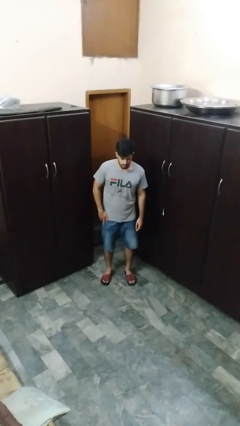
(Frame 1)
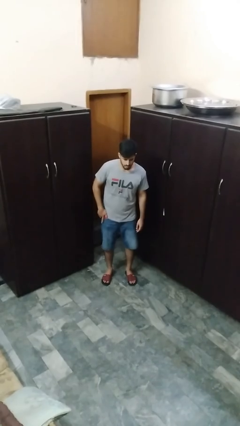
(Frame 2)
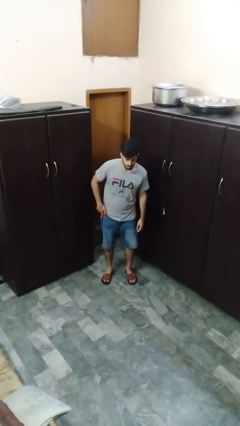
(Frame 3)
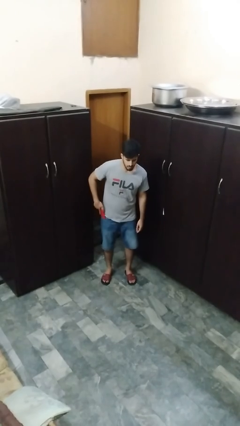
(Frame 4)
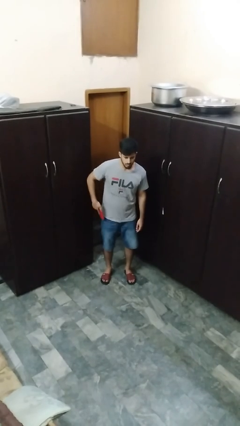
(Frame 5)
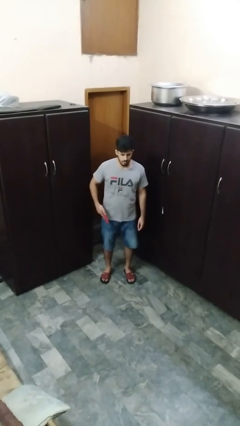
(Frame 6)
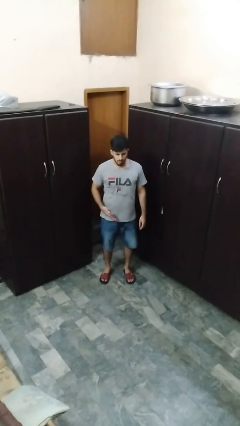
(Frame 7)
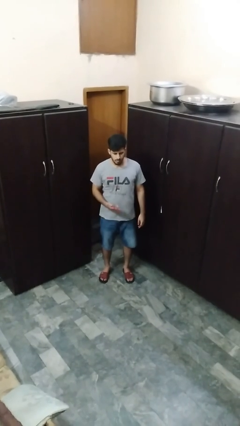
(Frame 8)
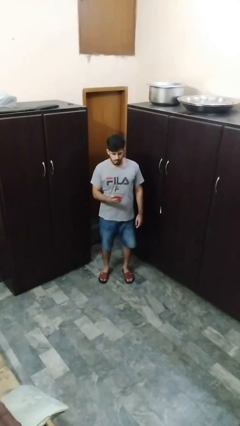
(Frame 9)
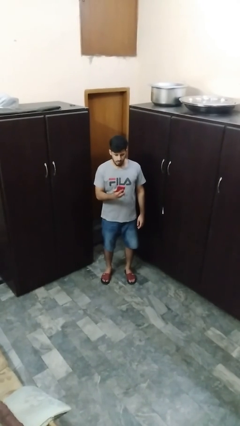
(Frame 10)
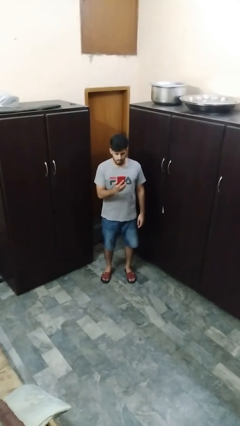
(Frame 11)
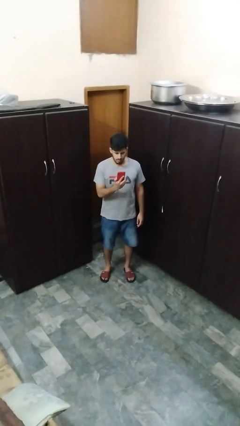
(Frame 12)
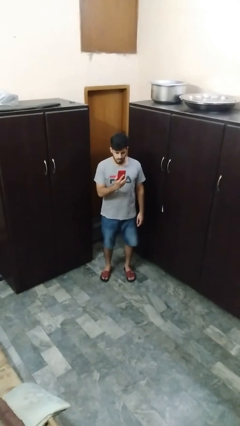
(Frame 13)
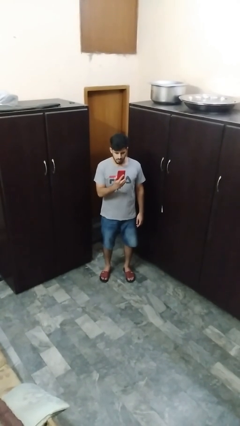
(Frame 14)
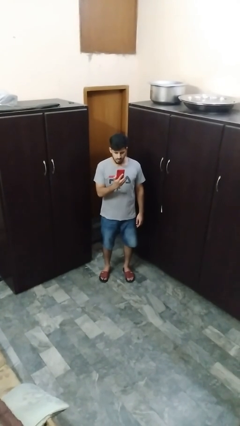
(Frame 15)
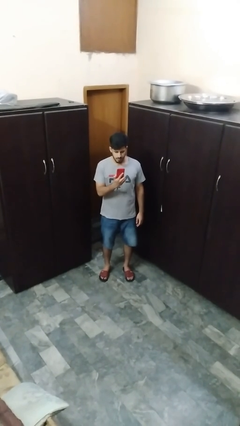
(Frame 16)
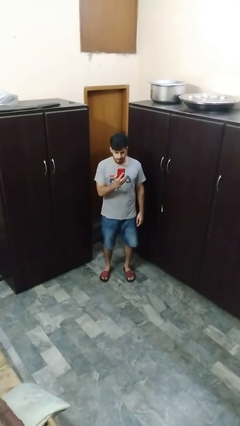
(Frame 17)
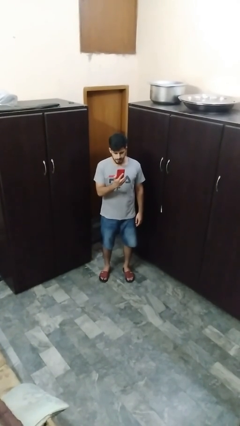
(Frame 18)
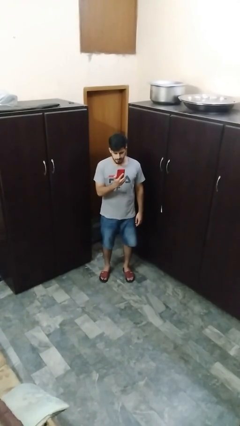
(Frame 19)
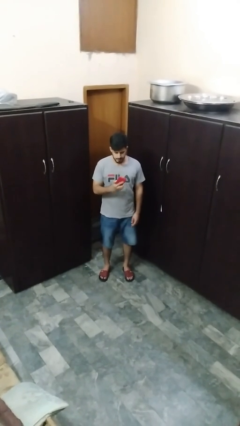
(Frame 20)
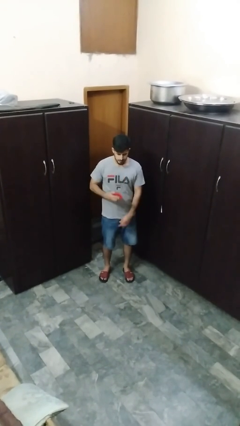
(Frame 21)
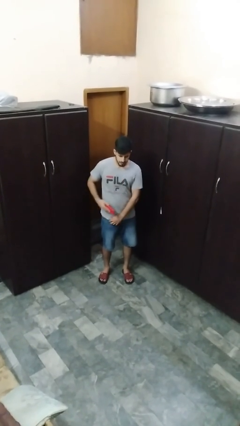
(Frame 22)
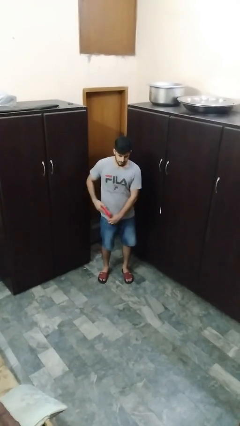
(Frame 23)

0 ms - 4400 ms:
person takes phone from pocket

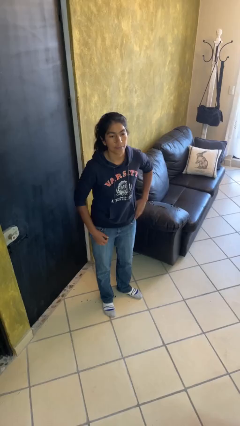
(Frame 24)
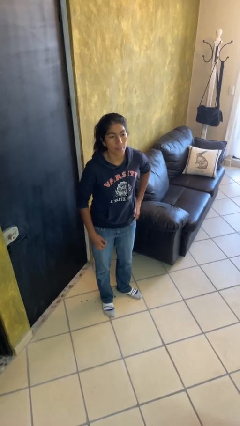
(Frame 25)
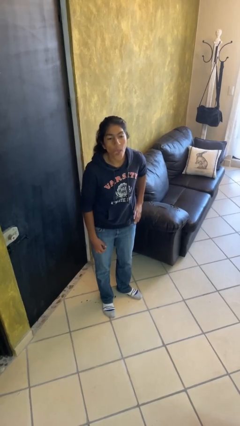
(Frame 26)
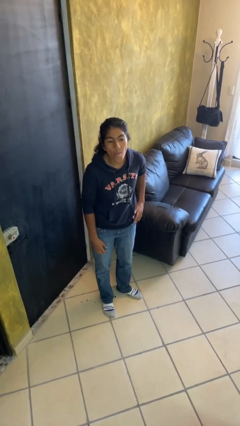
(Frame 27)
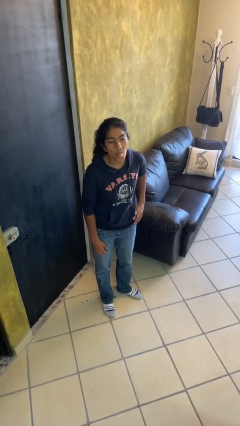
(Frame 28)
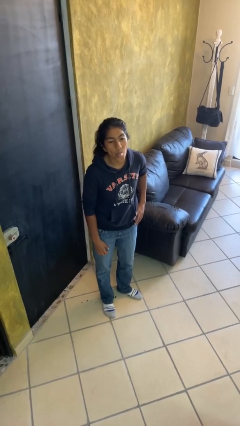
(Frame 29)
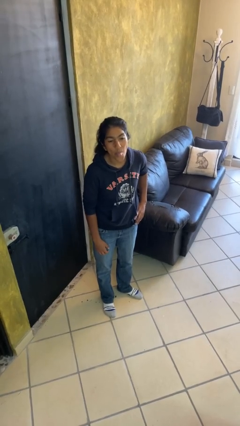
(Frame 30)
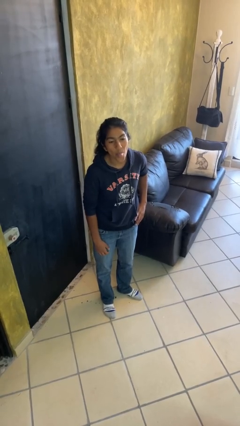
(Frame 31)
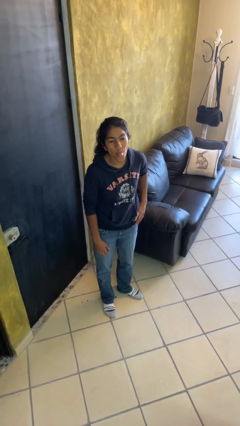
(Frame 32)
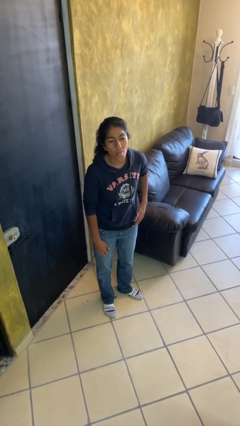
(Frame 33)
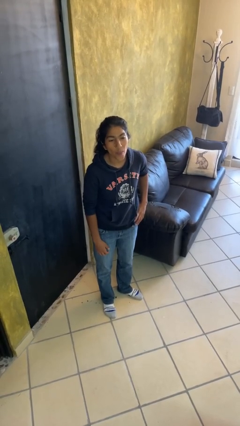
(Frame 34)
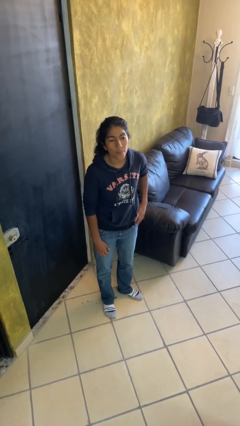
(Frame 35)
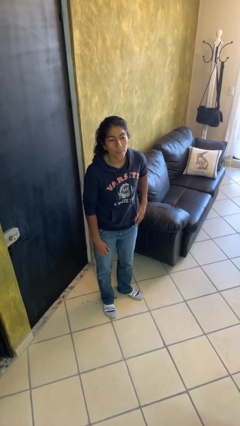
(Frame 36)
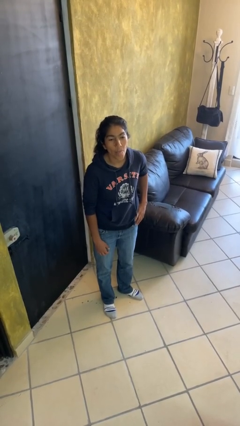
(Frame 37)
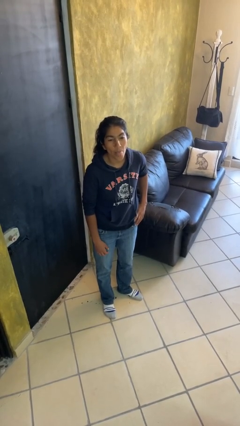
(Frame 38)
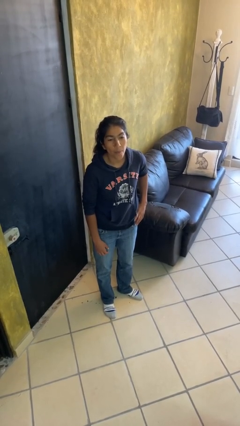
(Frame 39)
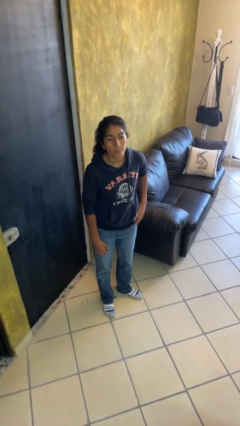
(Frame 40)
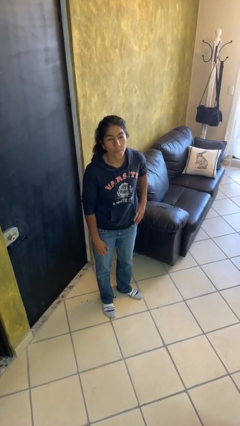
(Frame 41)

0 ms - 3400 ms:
person sticks out tongue

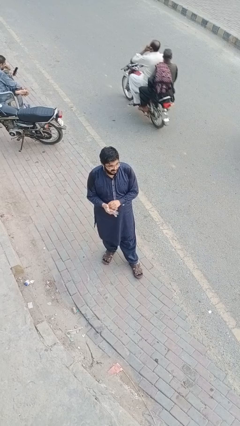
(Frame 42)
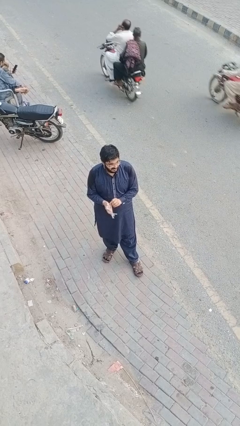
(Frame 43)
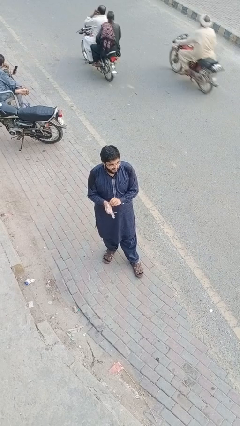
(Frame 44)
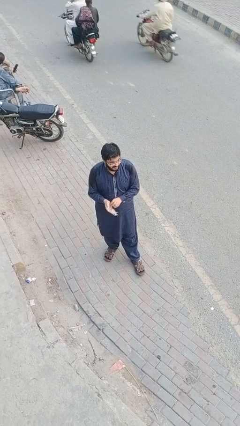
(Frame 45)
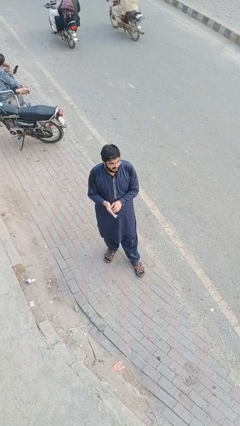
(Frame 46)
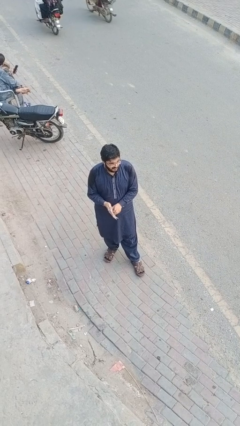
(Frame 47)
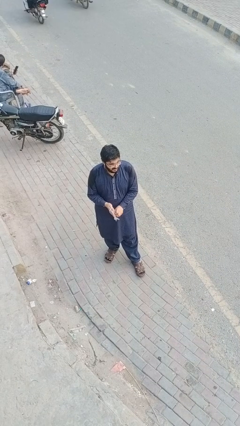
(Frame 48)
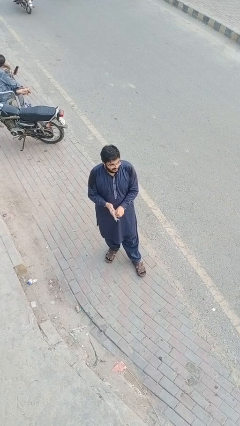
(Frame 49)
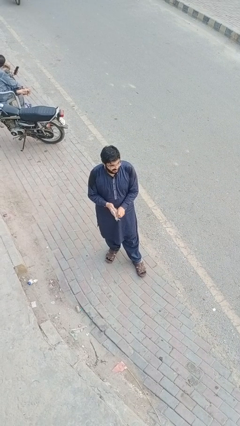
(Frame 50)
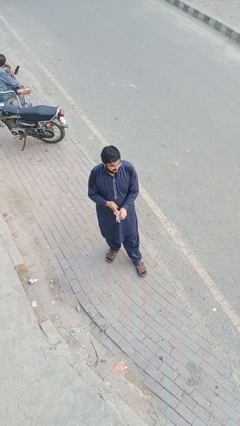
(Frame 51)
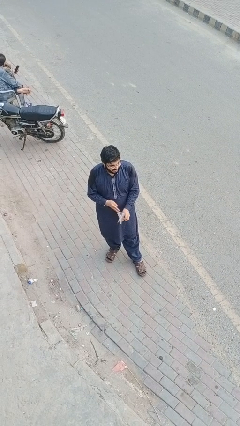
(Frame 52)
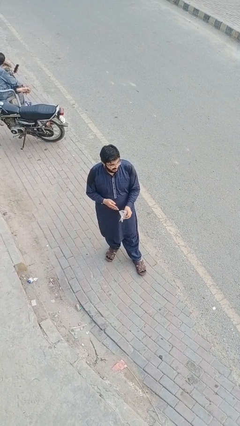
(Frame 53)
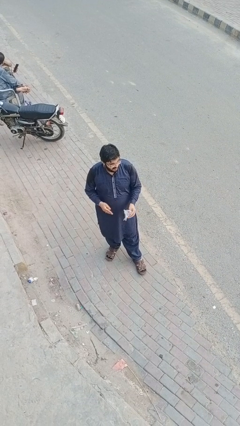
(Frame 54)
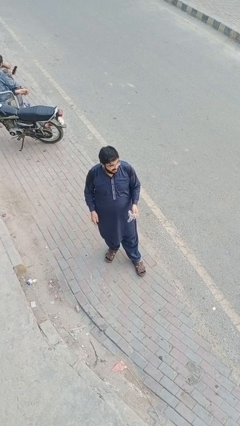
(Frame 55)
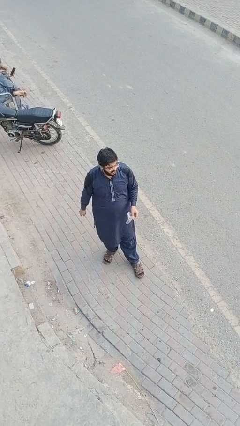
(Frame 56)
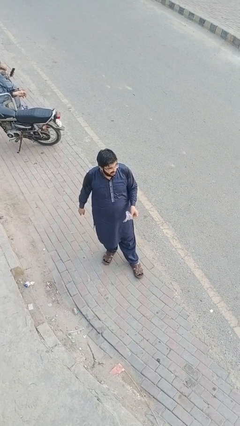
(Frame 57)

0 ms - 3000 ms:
person takes off gloves

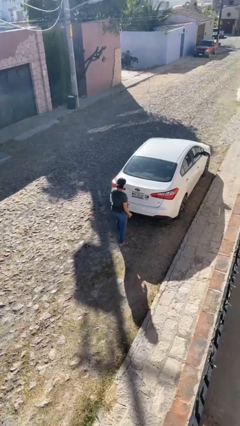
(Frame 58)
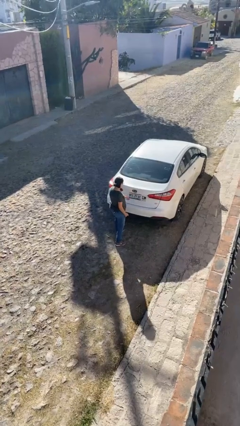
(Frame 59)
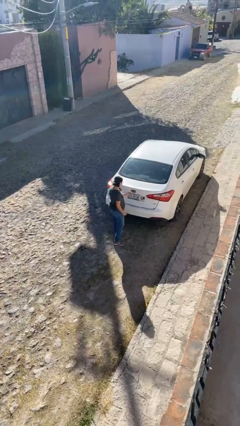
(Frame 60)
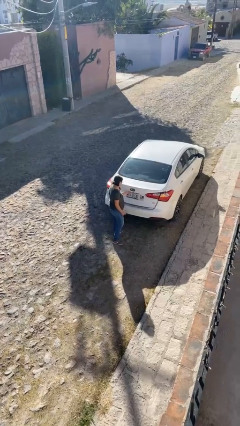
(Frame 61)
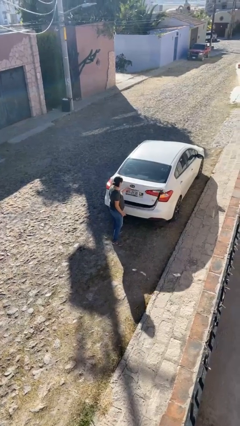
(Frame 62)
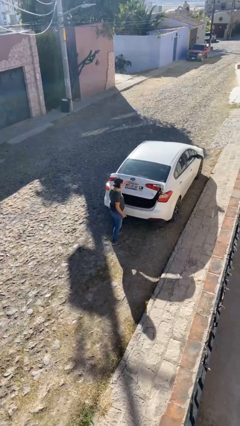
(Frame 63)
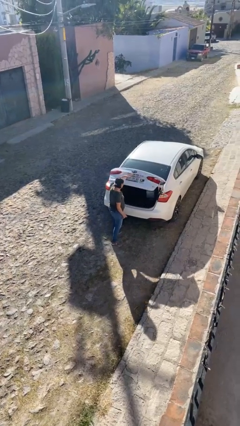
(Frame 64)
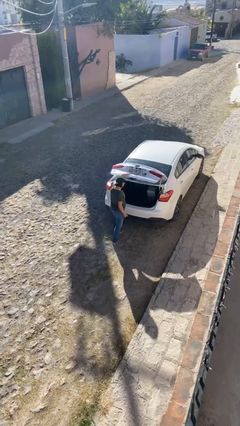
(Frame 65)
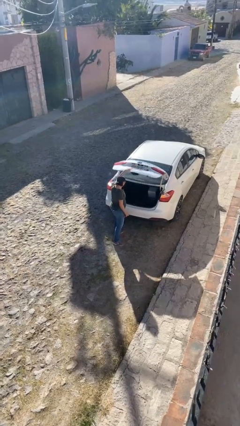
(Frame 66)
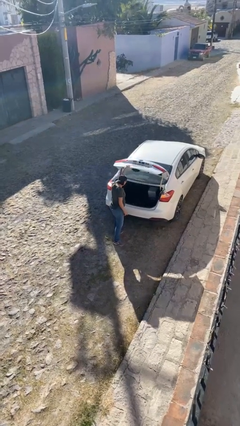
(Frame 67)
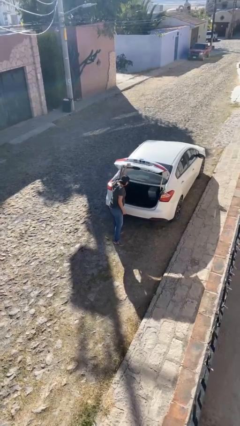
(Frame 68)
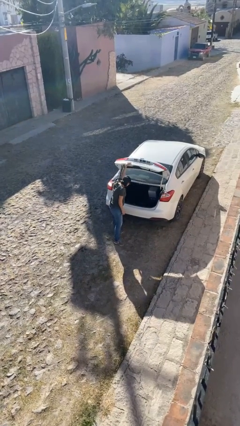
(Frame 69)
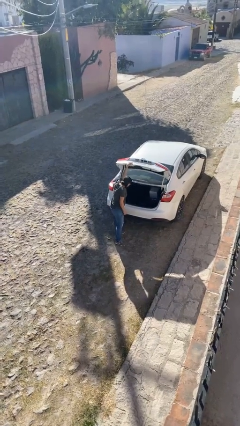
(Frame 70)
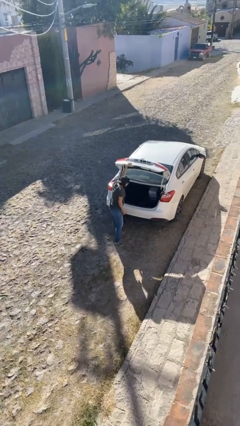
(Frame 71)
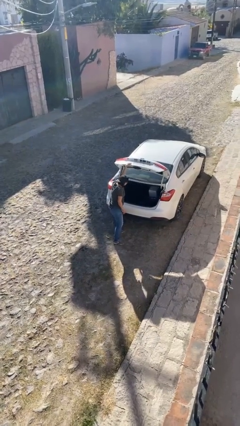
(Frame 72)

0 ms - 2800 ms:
person opens car trunk

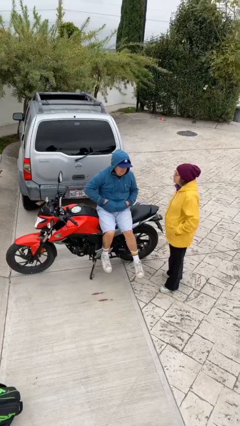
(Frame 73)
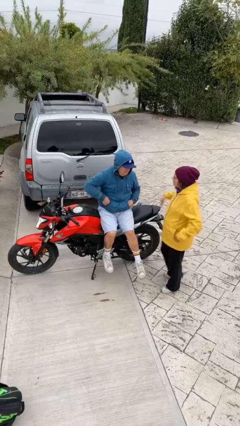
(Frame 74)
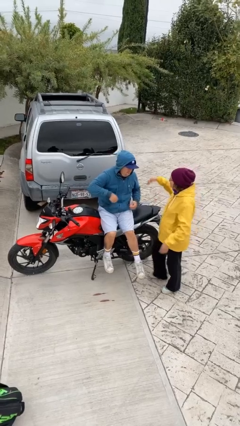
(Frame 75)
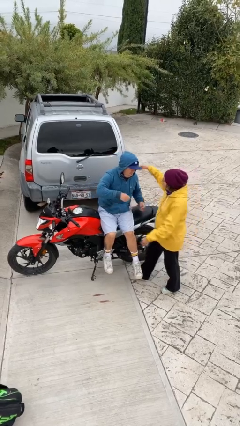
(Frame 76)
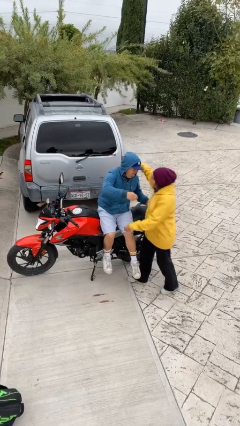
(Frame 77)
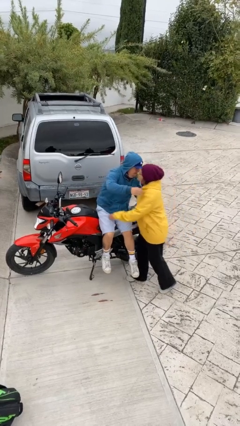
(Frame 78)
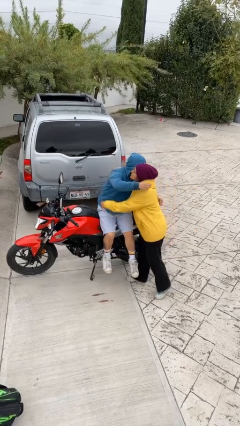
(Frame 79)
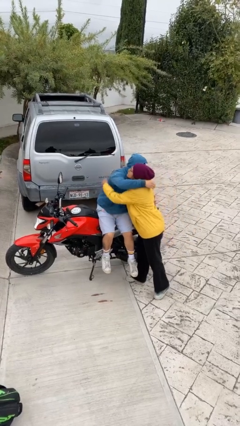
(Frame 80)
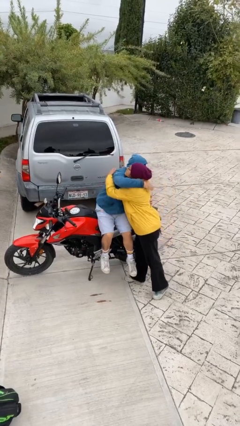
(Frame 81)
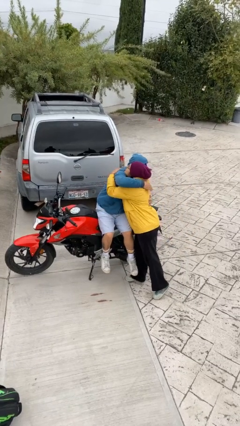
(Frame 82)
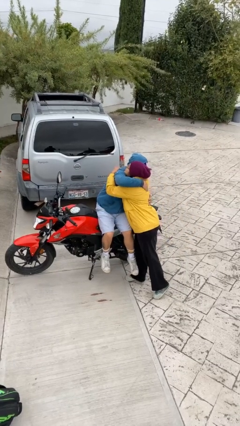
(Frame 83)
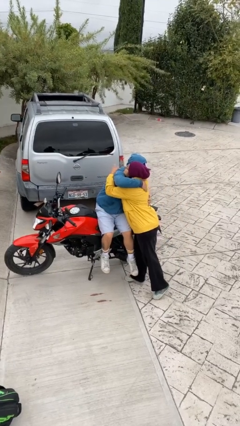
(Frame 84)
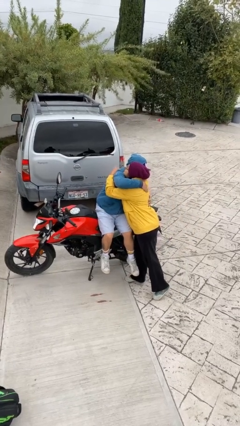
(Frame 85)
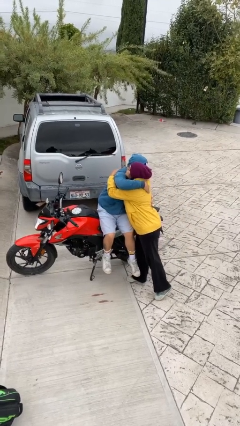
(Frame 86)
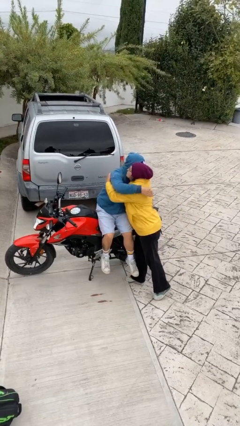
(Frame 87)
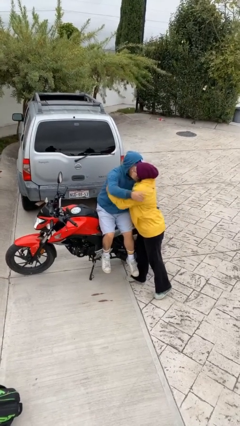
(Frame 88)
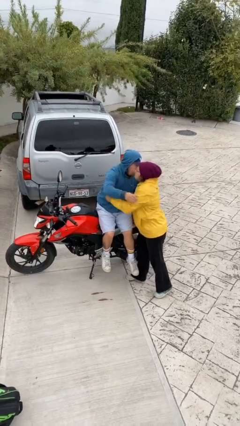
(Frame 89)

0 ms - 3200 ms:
person embraces person

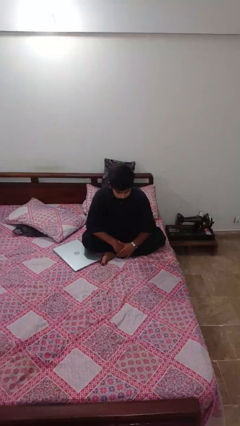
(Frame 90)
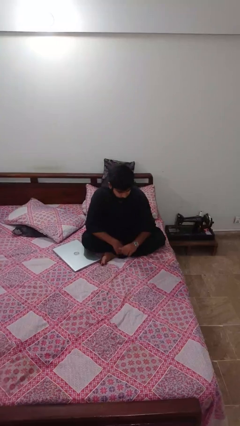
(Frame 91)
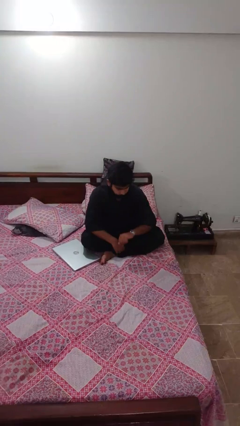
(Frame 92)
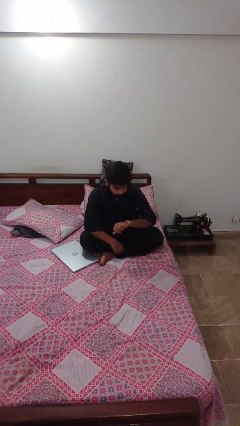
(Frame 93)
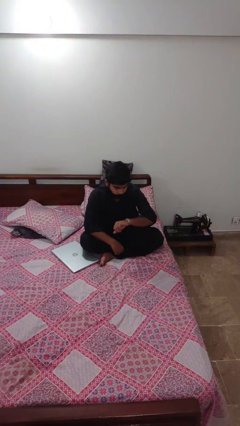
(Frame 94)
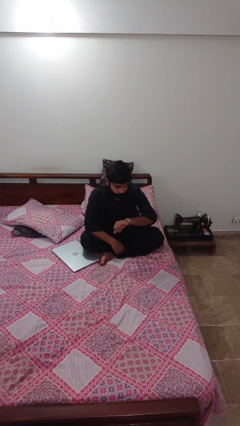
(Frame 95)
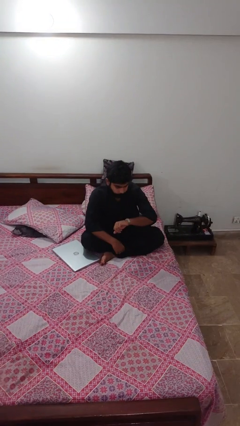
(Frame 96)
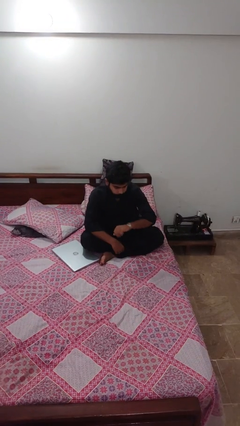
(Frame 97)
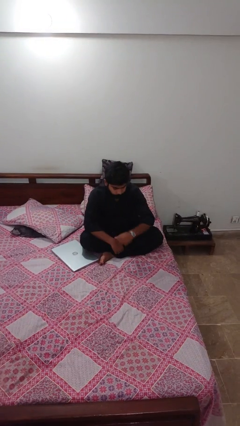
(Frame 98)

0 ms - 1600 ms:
person looks at wristwatch
